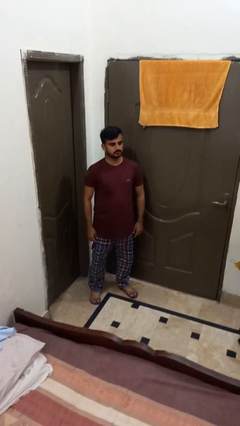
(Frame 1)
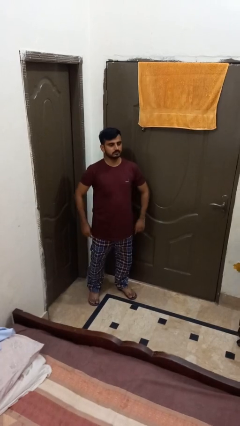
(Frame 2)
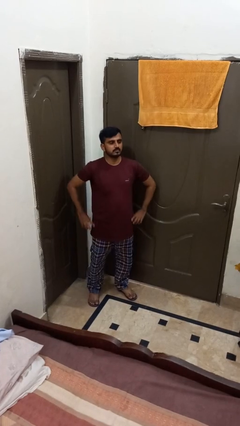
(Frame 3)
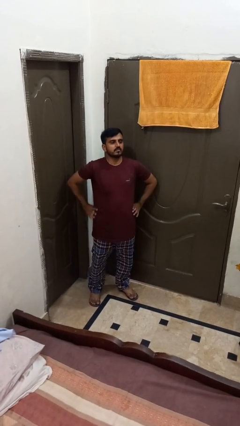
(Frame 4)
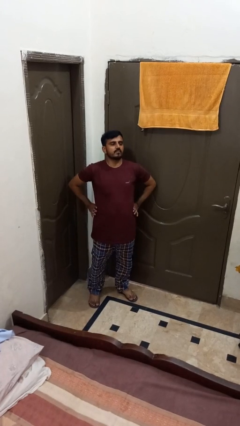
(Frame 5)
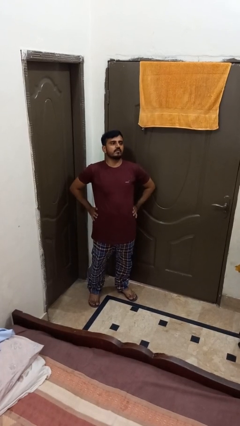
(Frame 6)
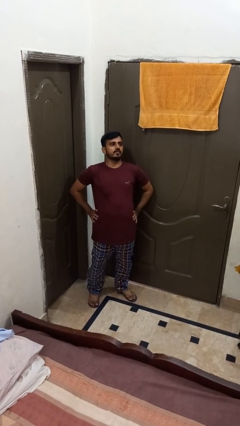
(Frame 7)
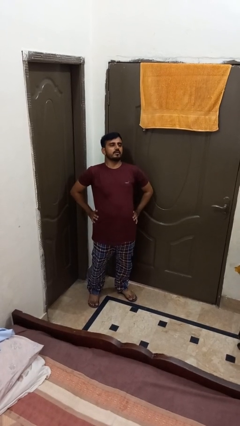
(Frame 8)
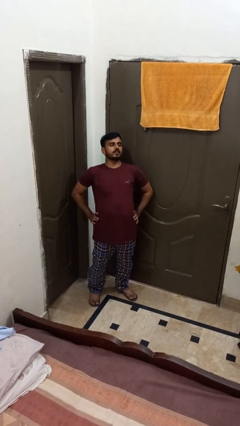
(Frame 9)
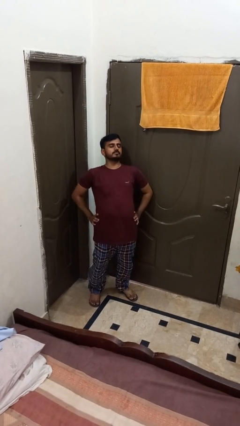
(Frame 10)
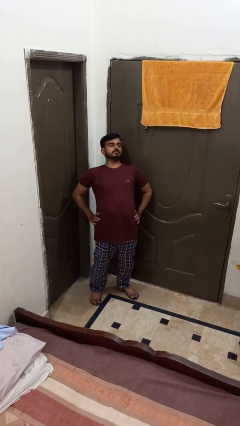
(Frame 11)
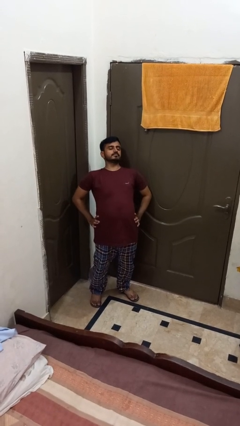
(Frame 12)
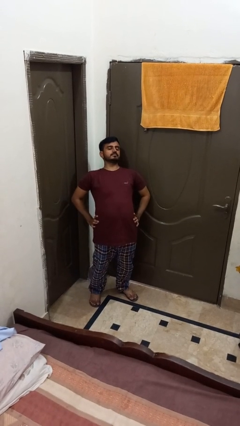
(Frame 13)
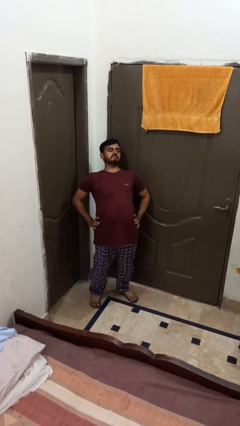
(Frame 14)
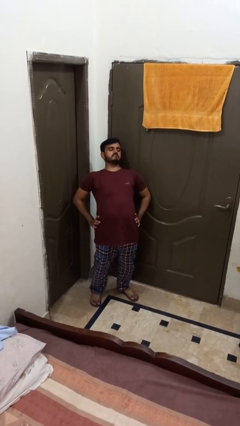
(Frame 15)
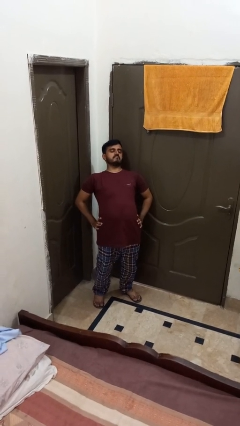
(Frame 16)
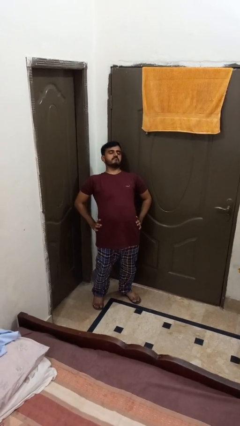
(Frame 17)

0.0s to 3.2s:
person stretches back

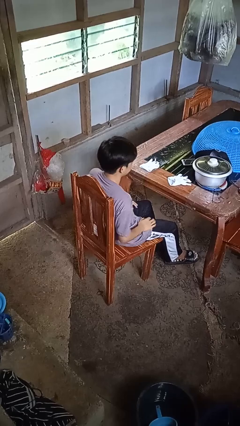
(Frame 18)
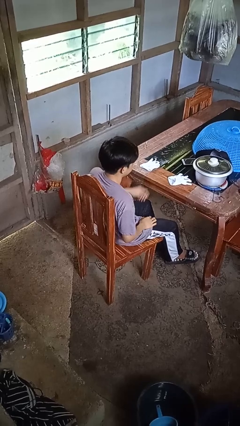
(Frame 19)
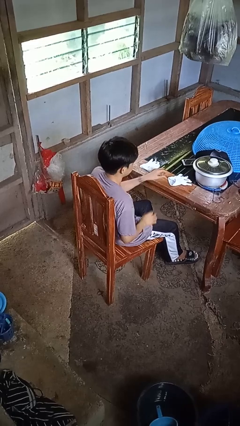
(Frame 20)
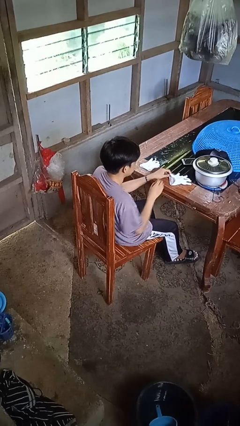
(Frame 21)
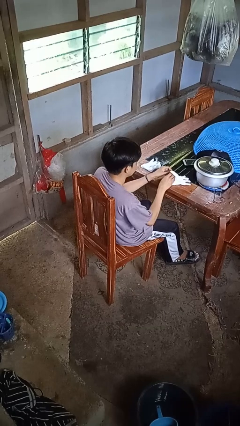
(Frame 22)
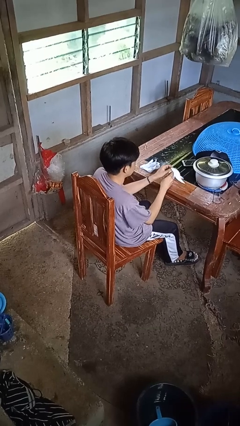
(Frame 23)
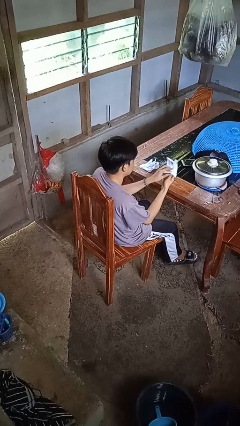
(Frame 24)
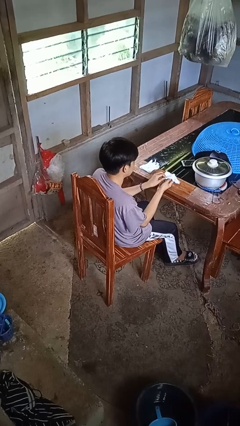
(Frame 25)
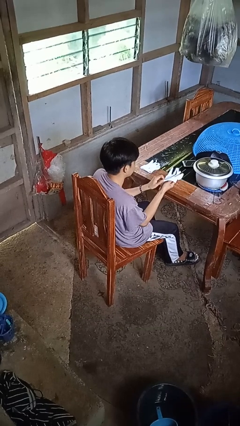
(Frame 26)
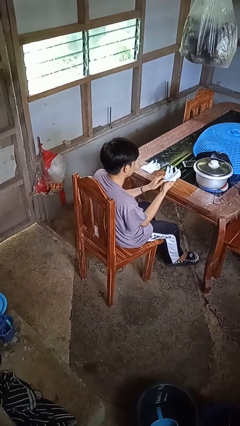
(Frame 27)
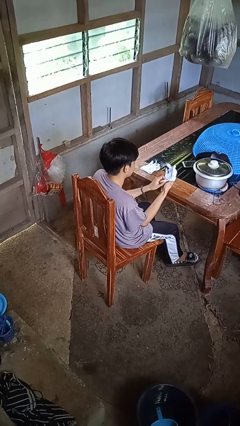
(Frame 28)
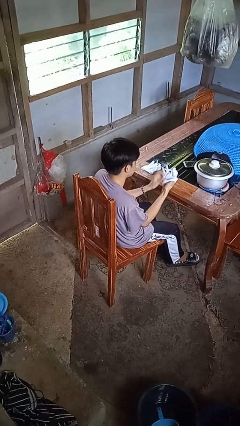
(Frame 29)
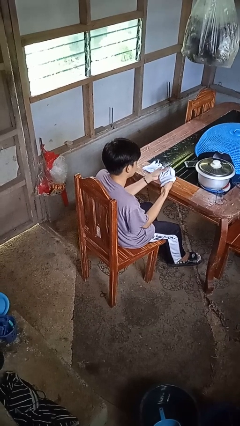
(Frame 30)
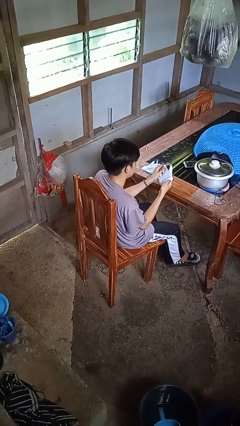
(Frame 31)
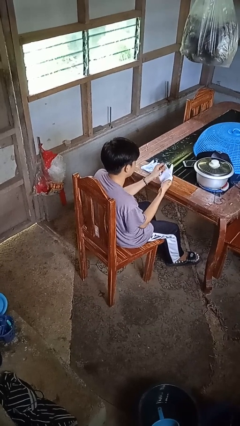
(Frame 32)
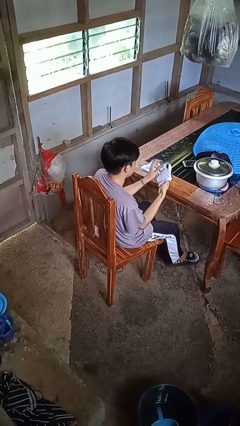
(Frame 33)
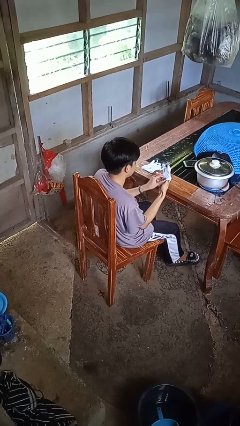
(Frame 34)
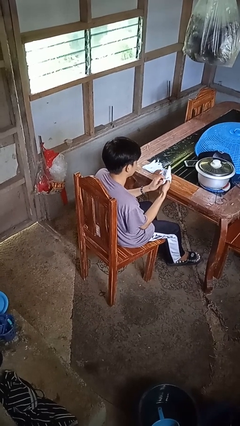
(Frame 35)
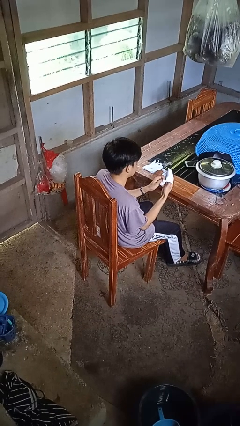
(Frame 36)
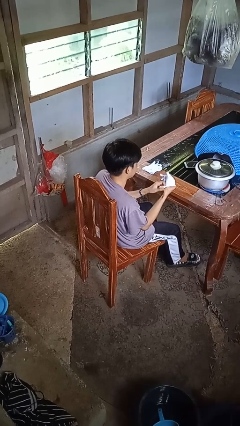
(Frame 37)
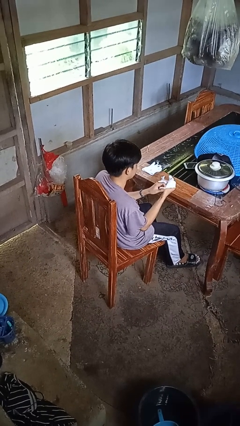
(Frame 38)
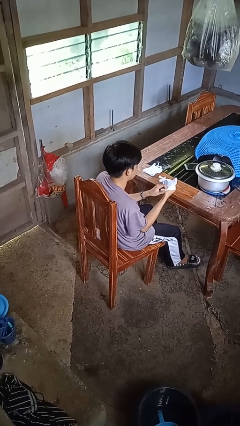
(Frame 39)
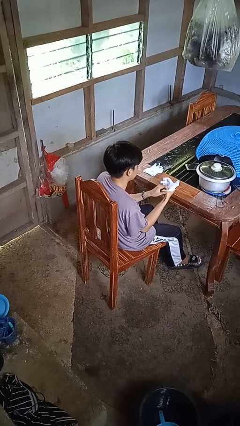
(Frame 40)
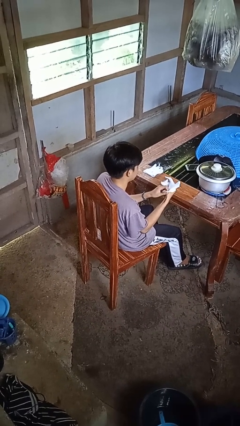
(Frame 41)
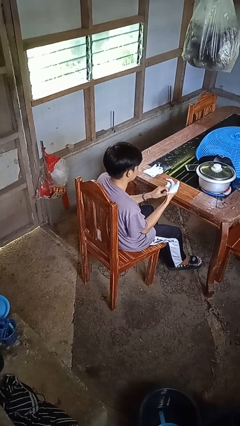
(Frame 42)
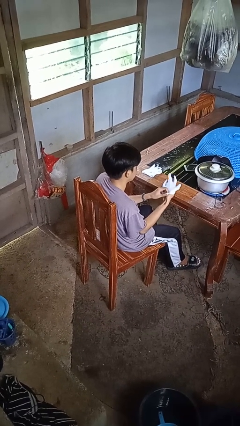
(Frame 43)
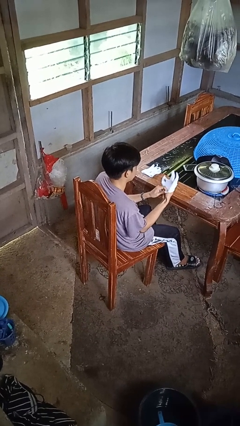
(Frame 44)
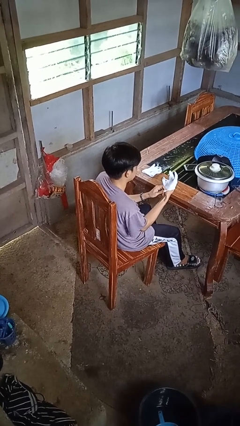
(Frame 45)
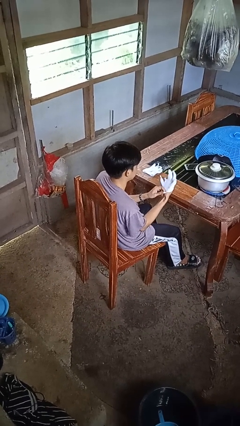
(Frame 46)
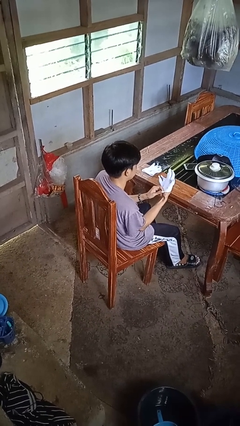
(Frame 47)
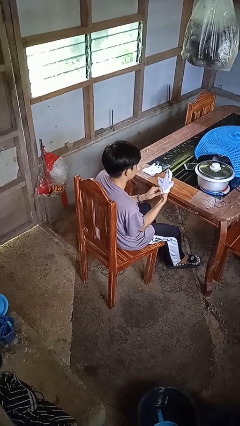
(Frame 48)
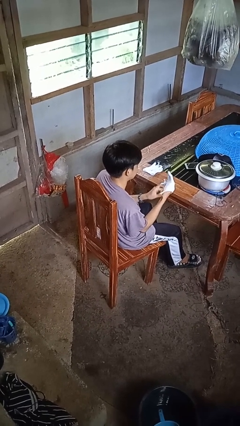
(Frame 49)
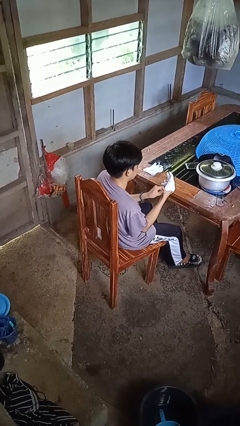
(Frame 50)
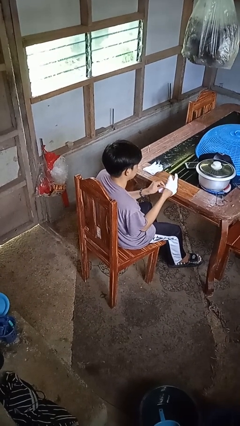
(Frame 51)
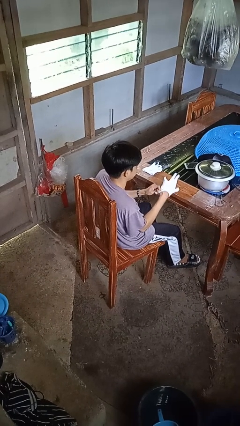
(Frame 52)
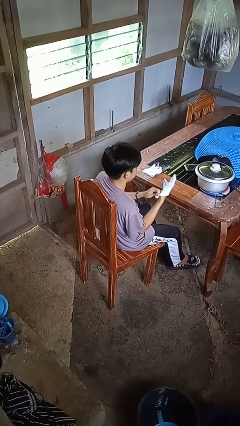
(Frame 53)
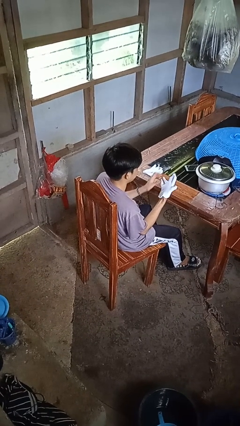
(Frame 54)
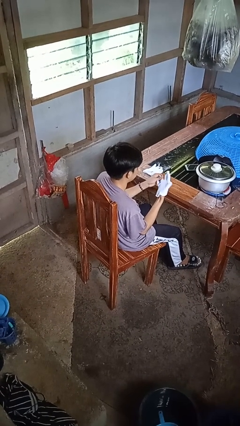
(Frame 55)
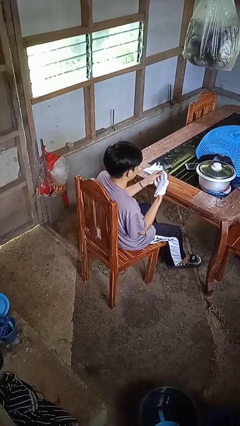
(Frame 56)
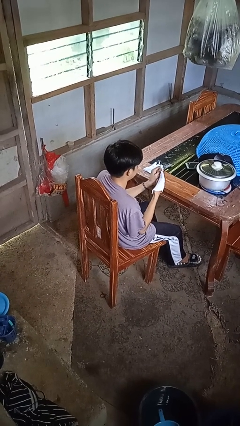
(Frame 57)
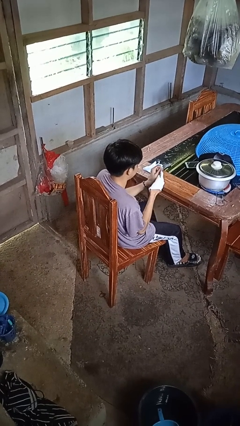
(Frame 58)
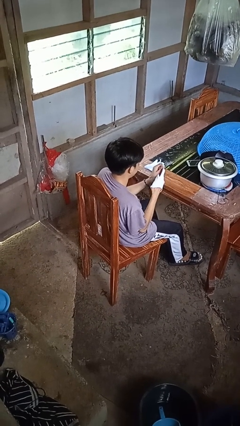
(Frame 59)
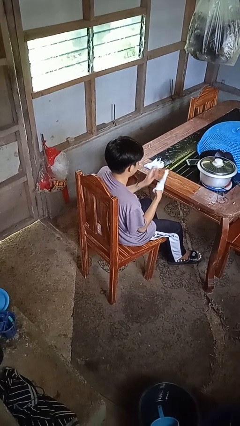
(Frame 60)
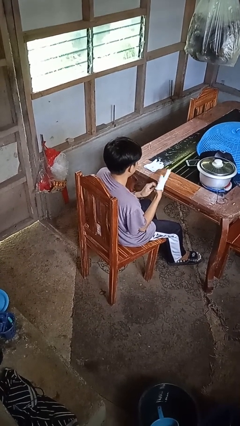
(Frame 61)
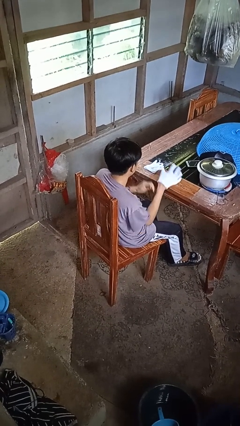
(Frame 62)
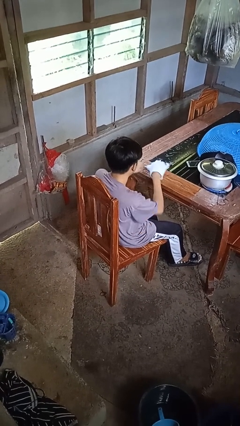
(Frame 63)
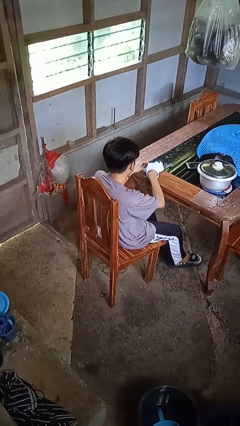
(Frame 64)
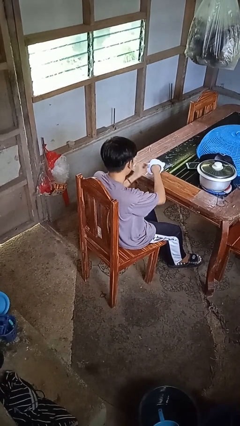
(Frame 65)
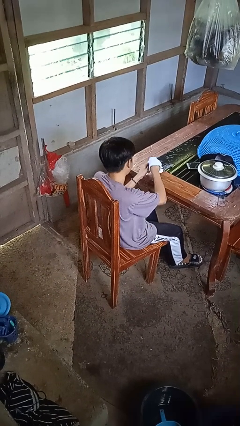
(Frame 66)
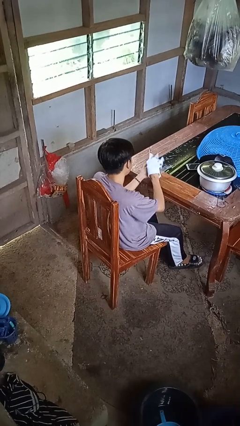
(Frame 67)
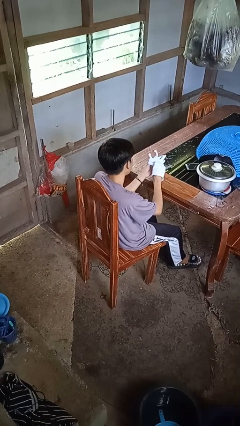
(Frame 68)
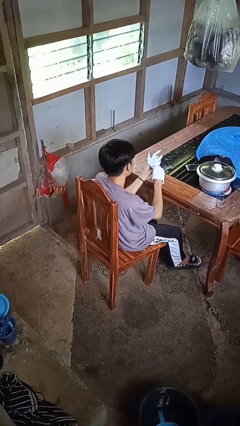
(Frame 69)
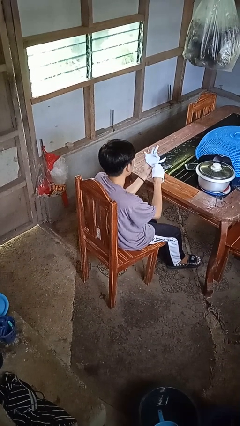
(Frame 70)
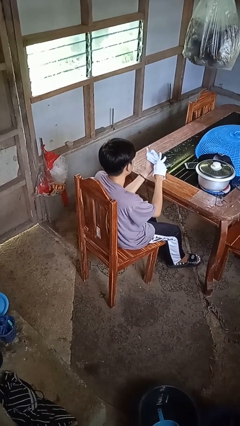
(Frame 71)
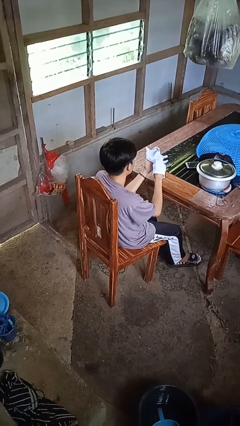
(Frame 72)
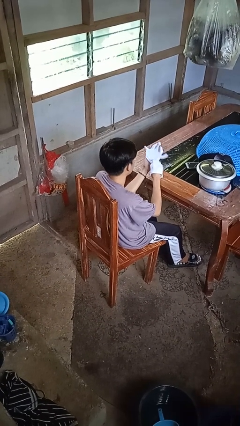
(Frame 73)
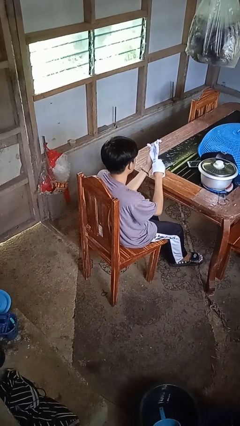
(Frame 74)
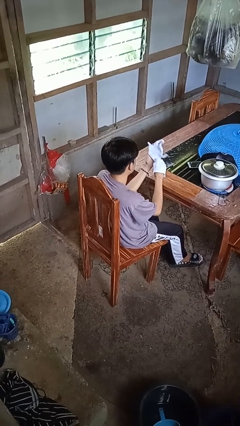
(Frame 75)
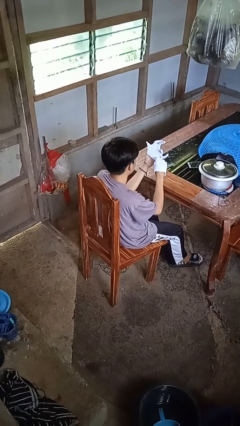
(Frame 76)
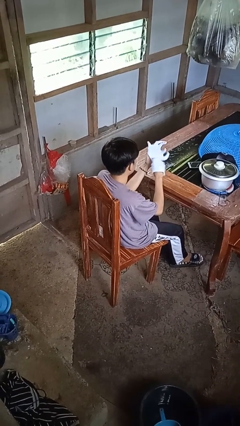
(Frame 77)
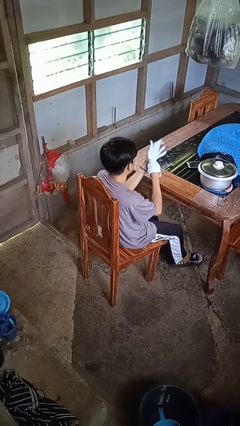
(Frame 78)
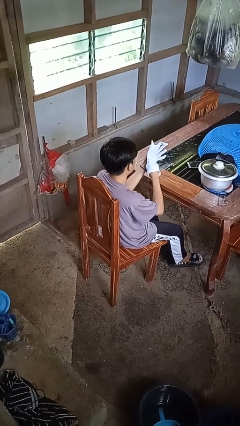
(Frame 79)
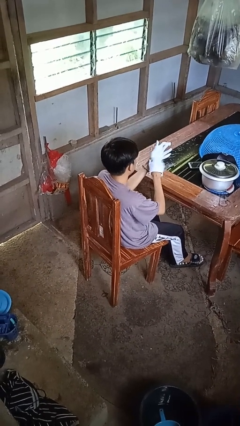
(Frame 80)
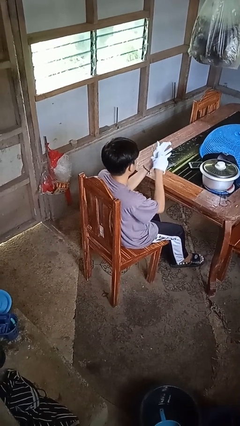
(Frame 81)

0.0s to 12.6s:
person puts on gloves

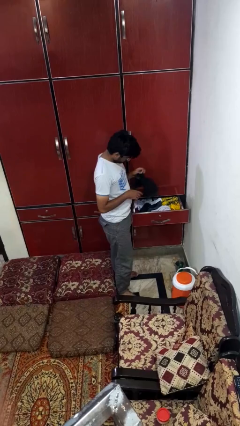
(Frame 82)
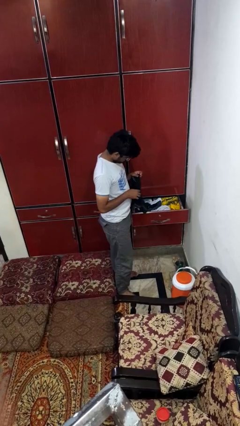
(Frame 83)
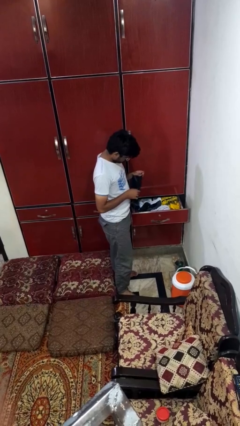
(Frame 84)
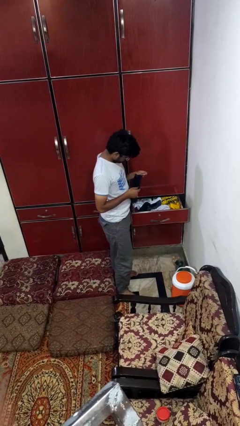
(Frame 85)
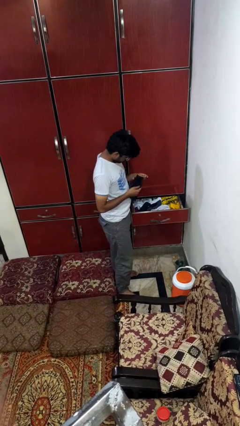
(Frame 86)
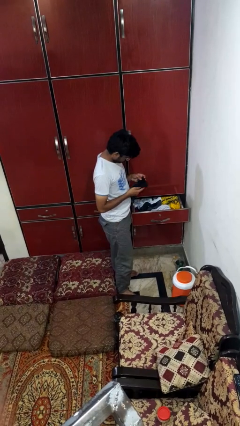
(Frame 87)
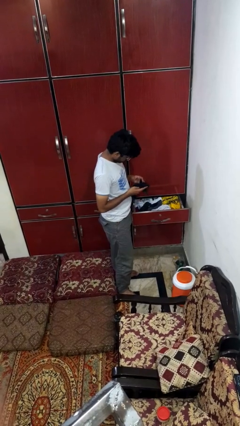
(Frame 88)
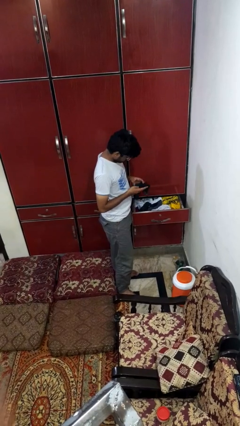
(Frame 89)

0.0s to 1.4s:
person takes clothes from dresser

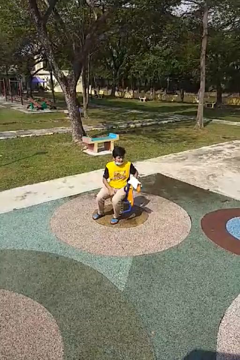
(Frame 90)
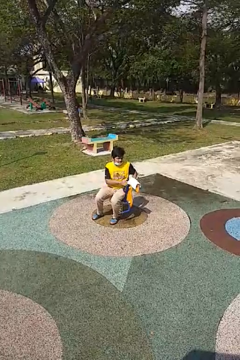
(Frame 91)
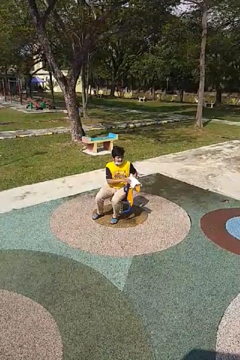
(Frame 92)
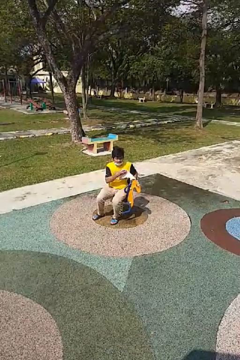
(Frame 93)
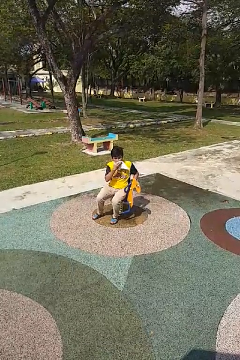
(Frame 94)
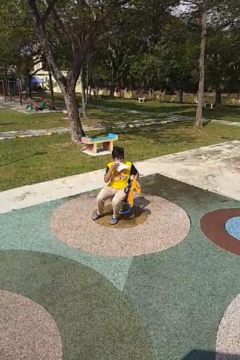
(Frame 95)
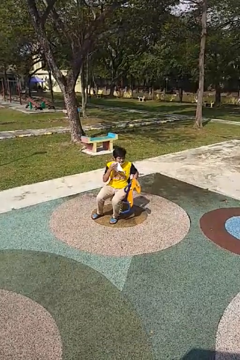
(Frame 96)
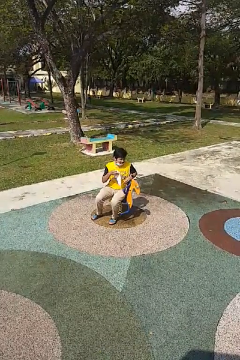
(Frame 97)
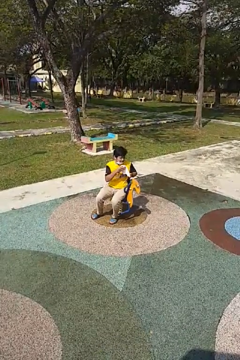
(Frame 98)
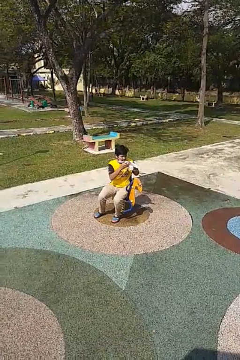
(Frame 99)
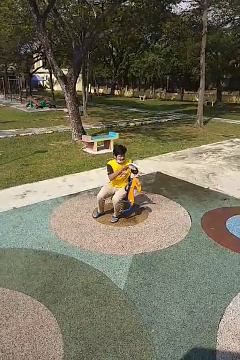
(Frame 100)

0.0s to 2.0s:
person wipes mouth with napkin
